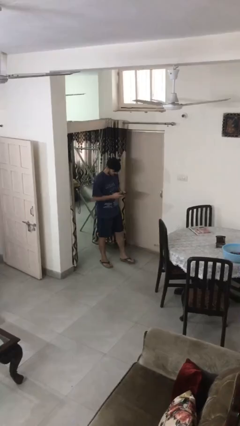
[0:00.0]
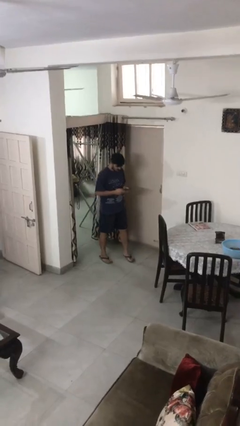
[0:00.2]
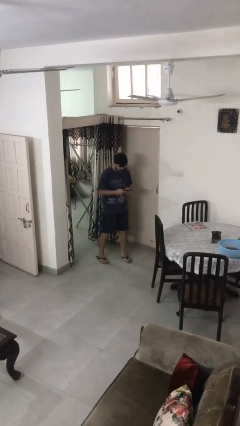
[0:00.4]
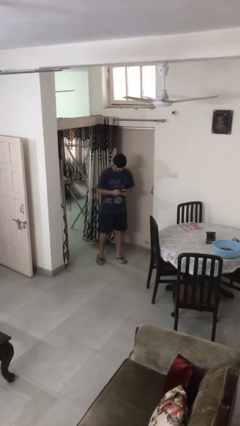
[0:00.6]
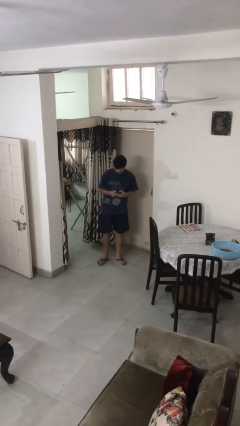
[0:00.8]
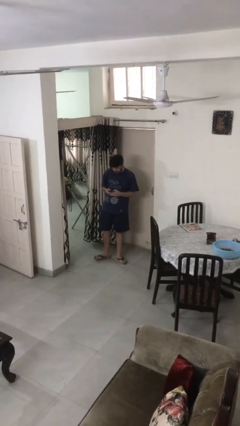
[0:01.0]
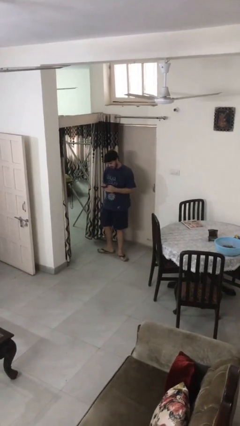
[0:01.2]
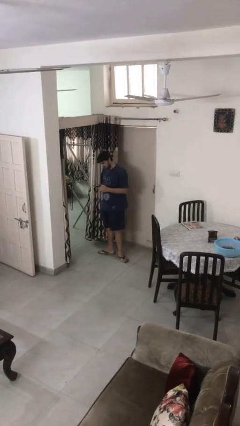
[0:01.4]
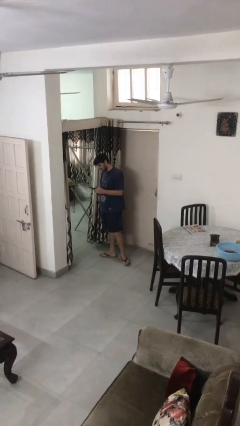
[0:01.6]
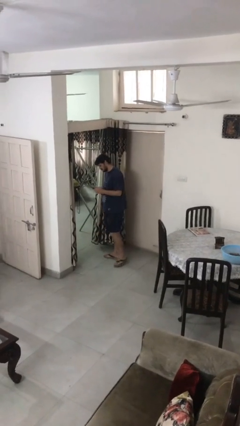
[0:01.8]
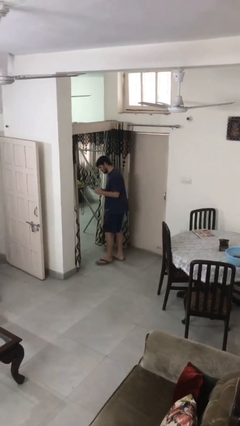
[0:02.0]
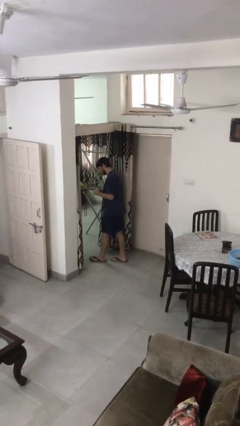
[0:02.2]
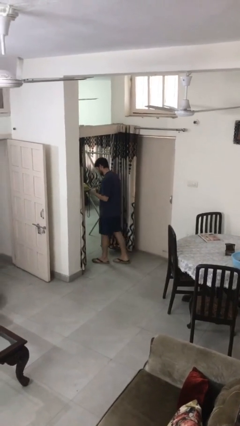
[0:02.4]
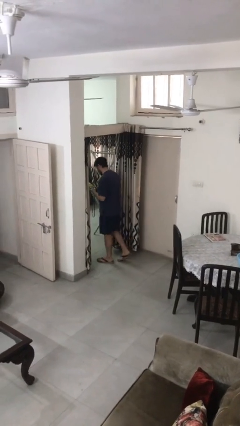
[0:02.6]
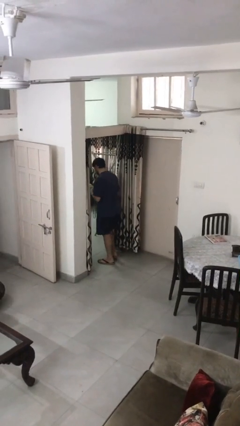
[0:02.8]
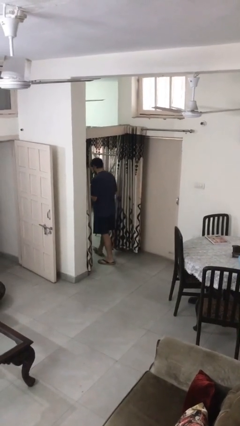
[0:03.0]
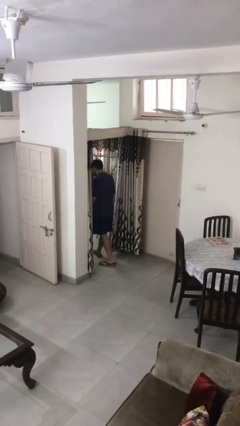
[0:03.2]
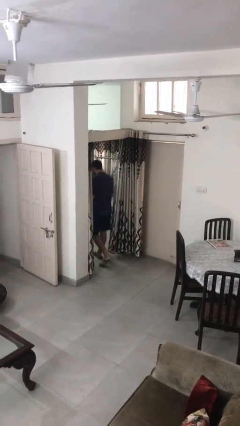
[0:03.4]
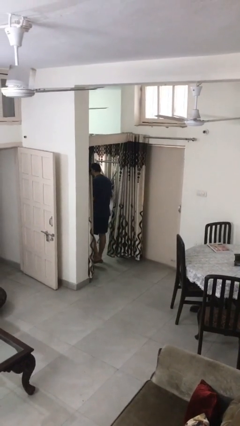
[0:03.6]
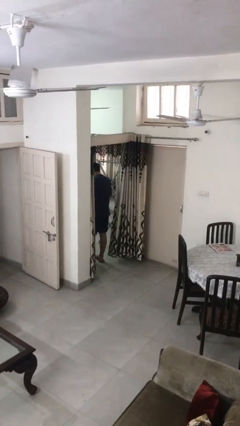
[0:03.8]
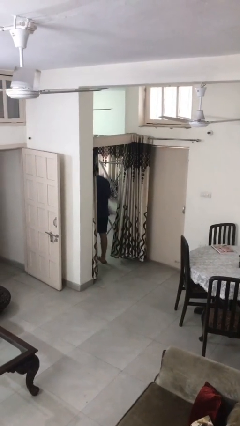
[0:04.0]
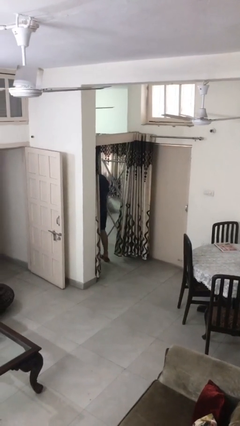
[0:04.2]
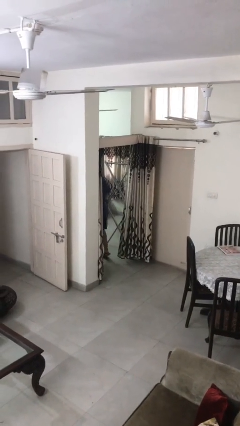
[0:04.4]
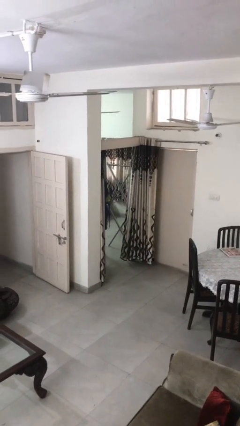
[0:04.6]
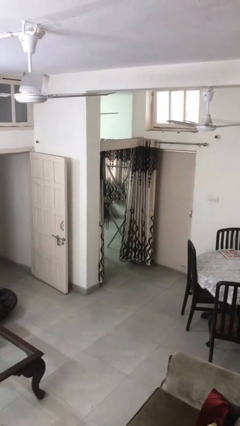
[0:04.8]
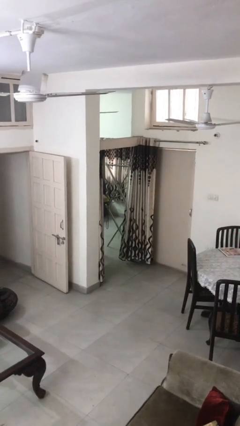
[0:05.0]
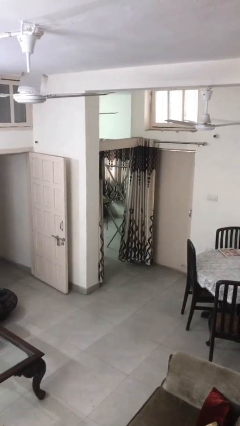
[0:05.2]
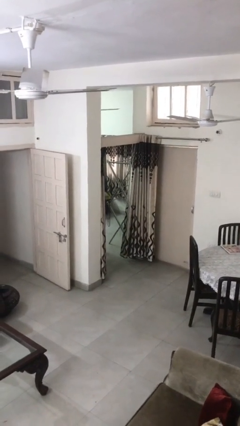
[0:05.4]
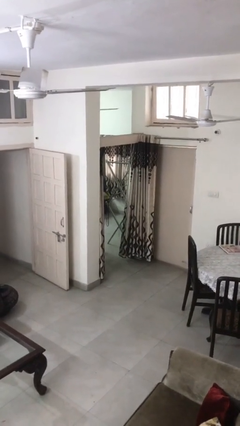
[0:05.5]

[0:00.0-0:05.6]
person exits scene through structure

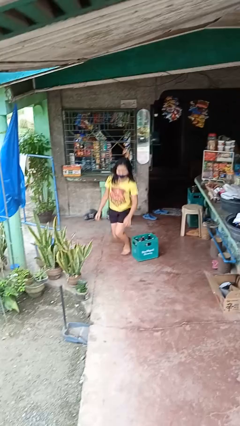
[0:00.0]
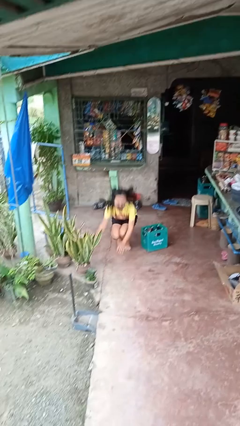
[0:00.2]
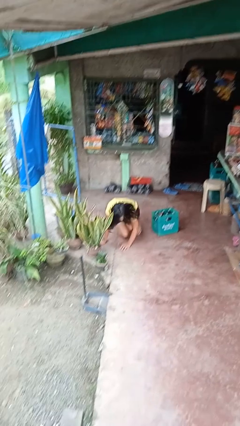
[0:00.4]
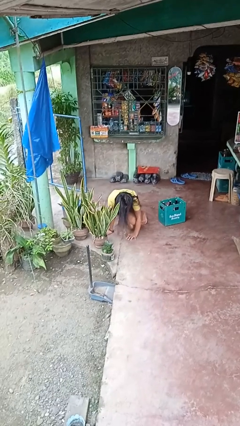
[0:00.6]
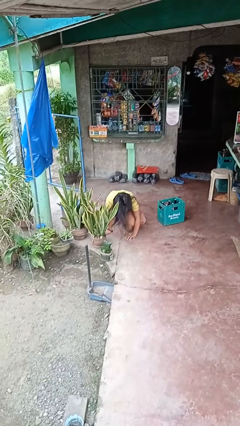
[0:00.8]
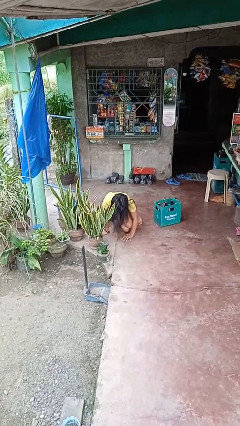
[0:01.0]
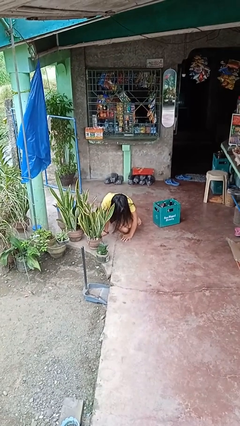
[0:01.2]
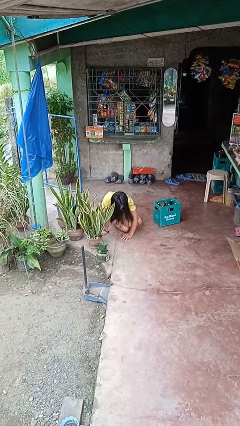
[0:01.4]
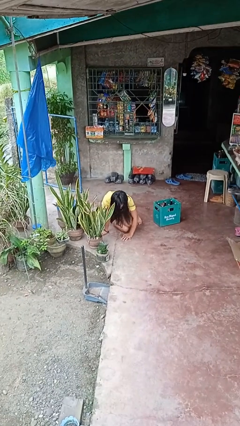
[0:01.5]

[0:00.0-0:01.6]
person lies down on floor

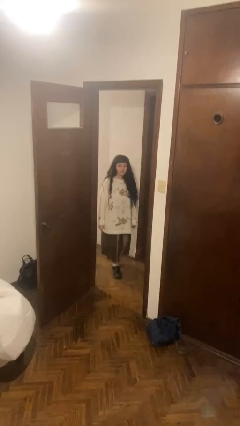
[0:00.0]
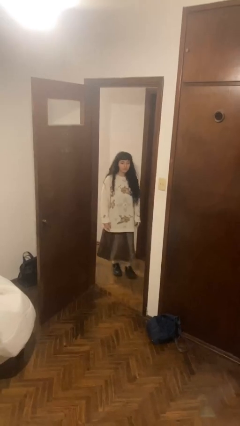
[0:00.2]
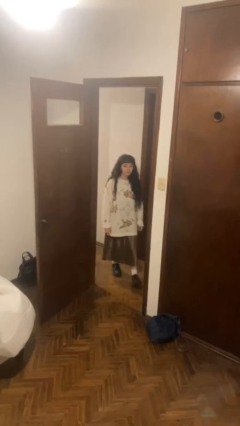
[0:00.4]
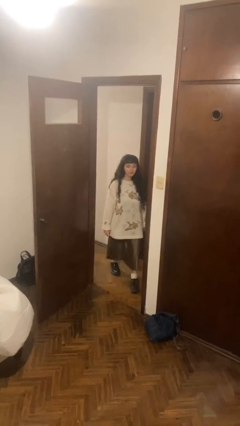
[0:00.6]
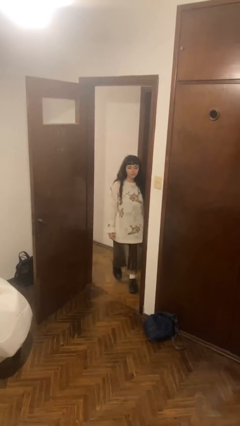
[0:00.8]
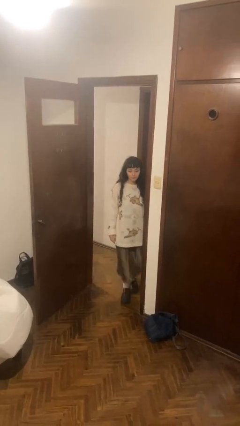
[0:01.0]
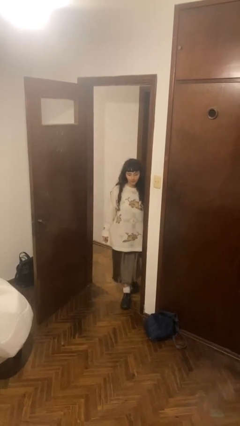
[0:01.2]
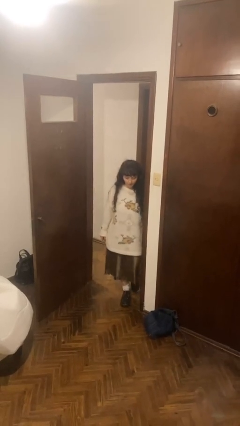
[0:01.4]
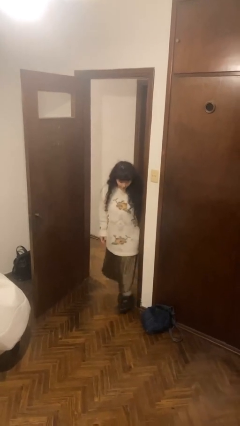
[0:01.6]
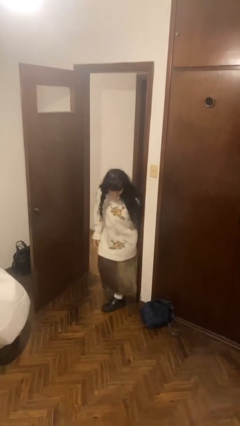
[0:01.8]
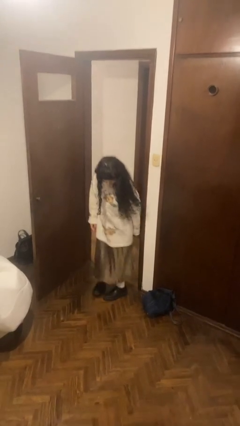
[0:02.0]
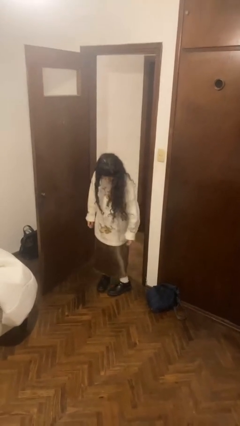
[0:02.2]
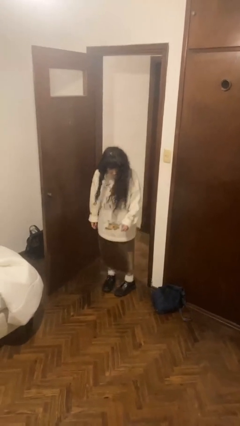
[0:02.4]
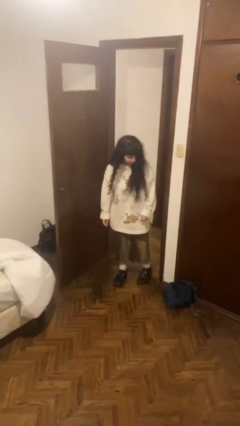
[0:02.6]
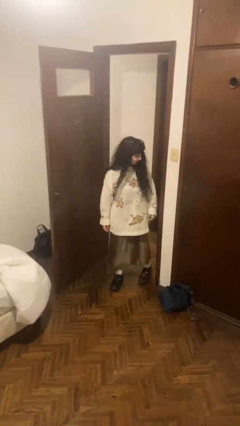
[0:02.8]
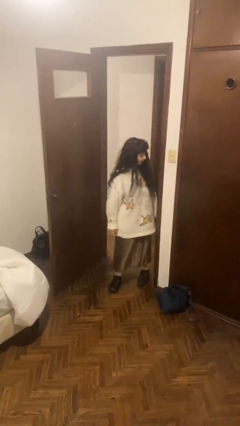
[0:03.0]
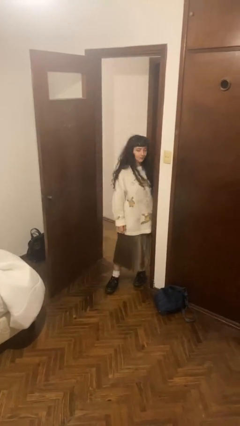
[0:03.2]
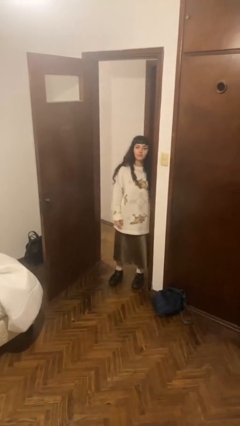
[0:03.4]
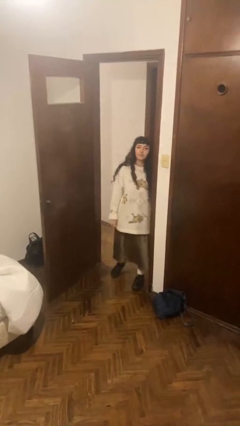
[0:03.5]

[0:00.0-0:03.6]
person bumps into wall

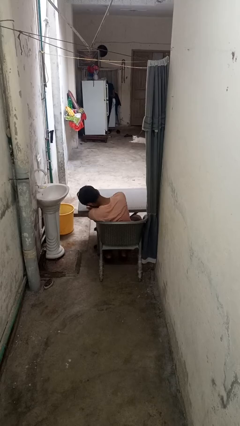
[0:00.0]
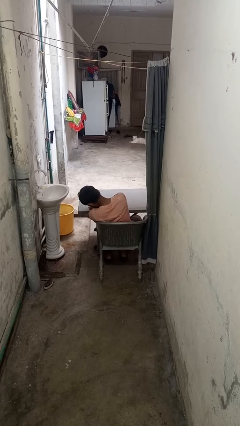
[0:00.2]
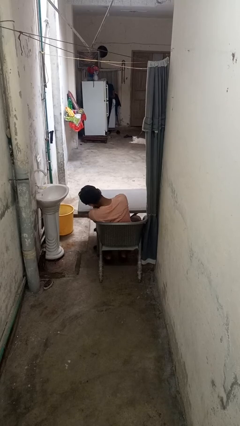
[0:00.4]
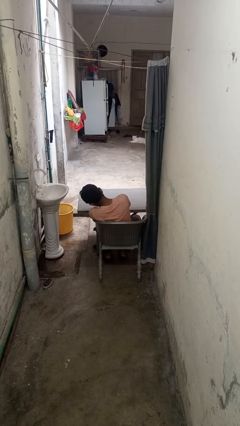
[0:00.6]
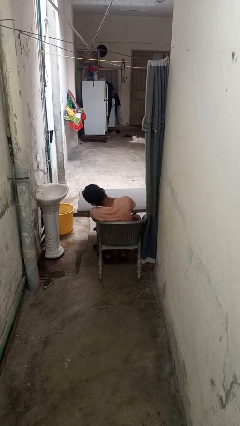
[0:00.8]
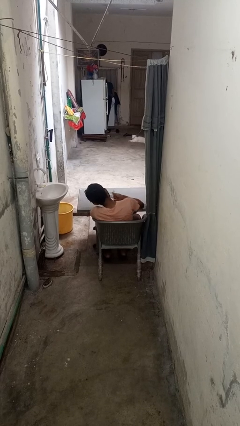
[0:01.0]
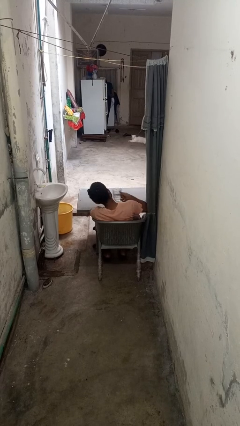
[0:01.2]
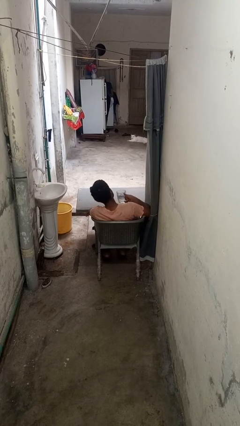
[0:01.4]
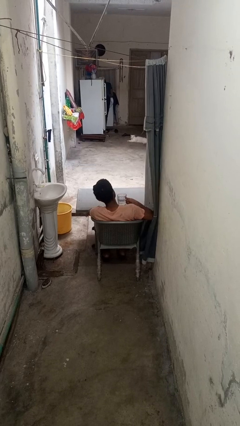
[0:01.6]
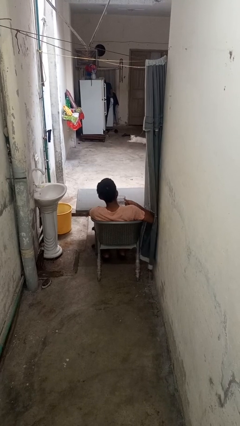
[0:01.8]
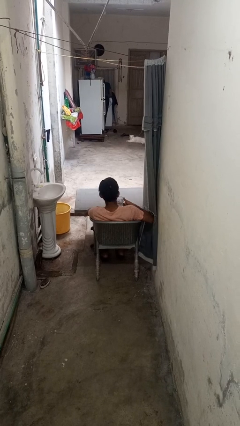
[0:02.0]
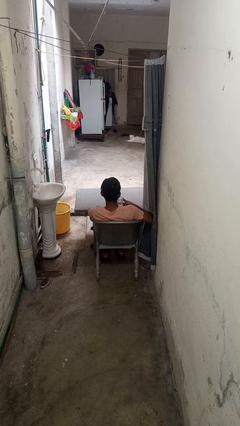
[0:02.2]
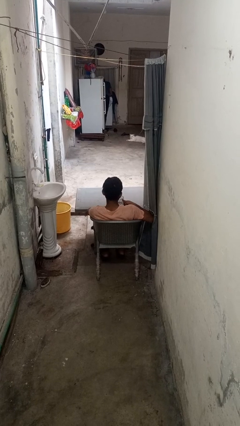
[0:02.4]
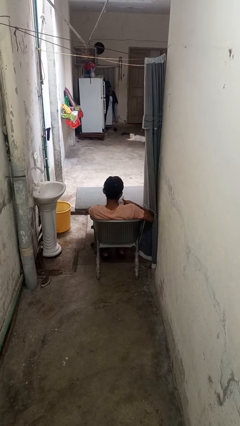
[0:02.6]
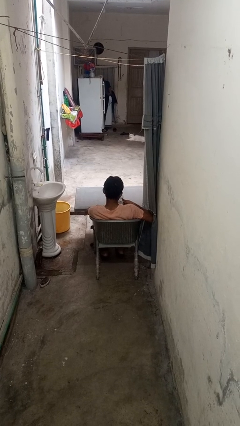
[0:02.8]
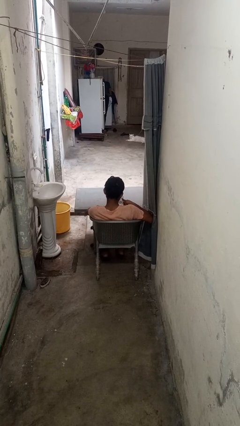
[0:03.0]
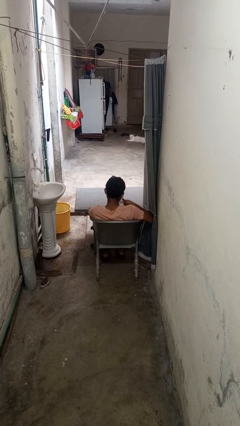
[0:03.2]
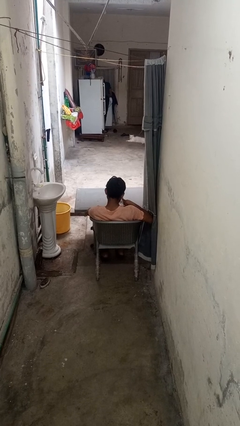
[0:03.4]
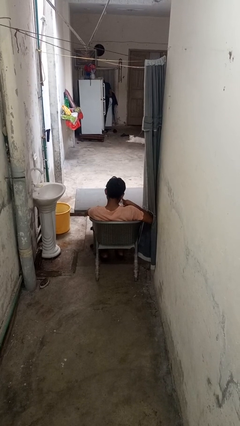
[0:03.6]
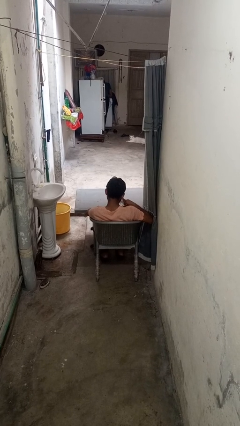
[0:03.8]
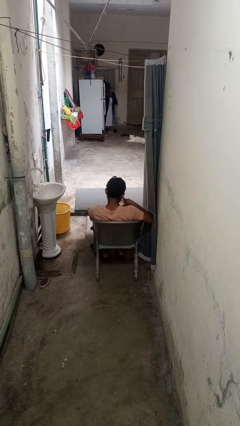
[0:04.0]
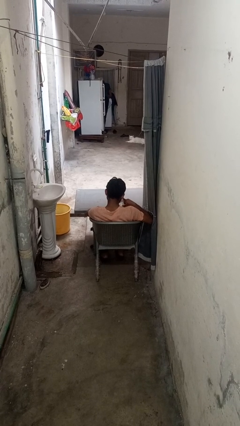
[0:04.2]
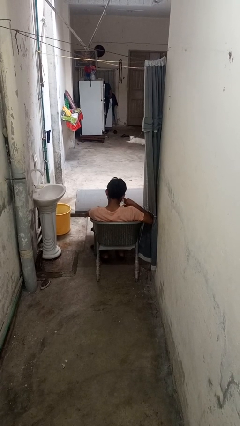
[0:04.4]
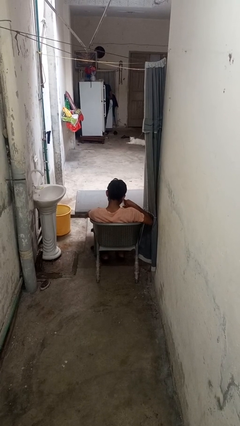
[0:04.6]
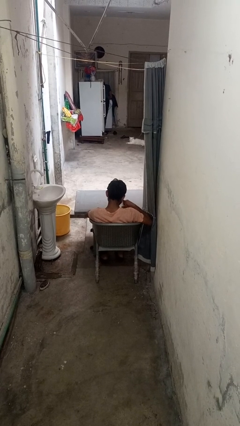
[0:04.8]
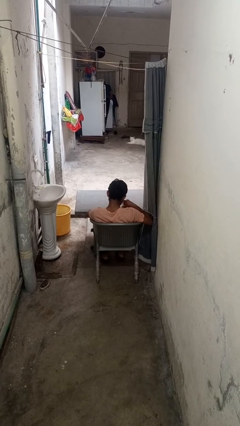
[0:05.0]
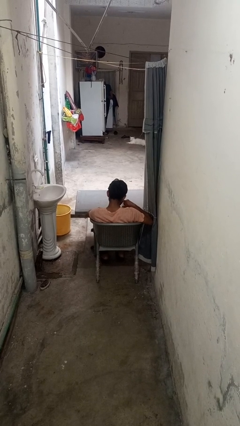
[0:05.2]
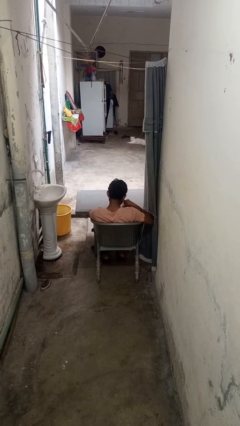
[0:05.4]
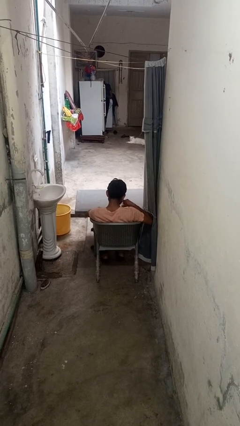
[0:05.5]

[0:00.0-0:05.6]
person picks up object from table

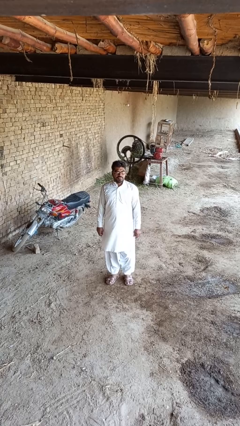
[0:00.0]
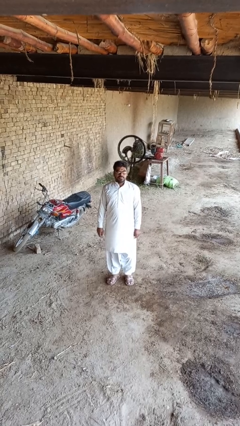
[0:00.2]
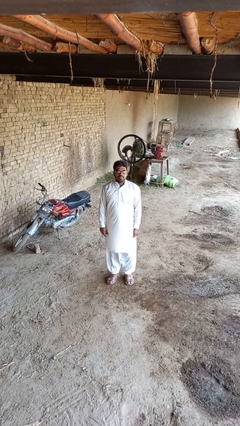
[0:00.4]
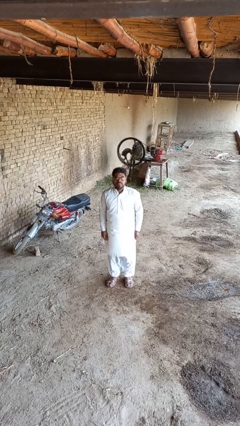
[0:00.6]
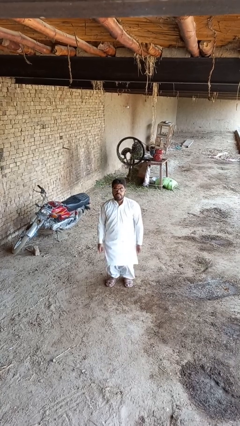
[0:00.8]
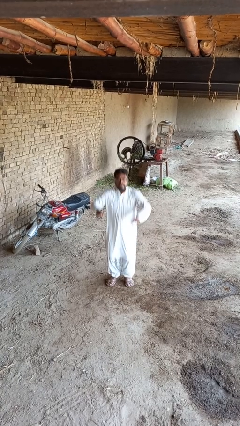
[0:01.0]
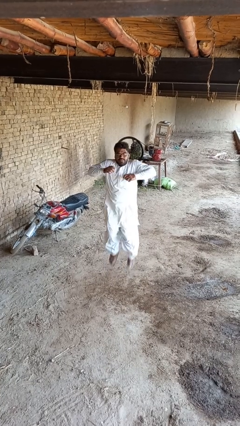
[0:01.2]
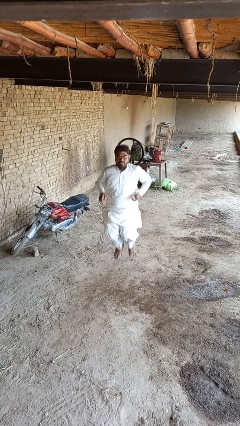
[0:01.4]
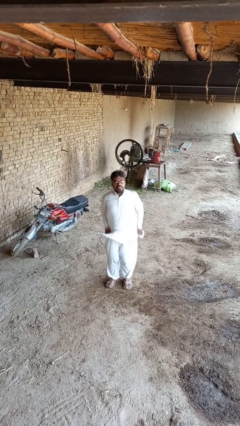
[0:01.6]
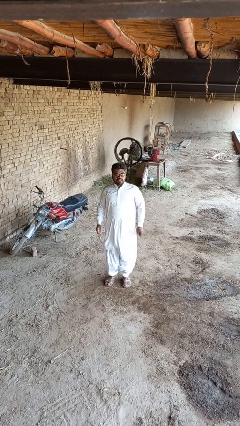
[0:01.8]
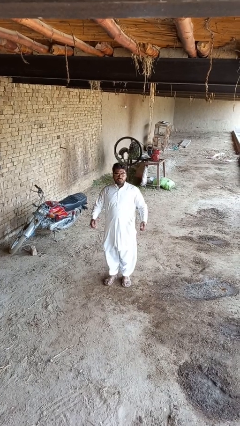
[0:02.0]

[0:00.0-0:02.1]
person jumps
